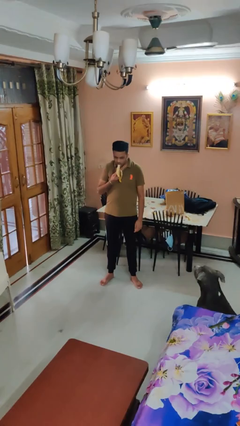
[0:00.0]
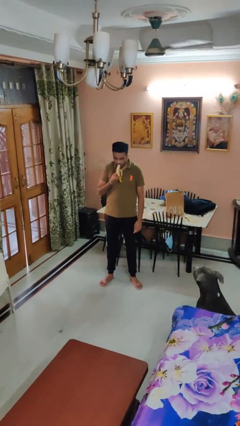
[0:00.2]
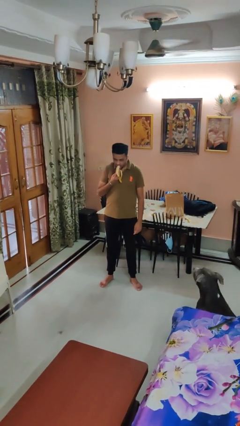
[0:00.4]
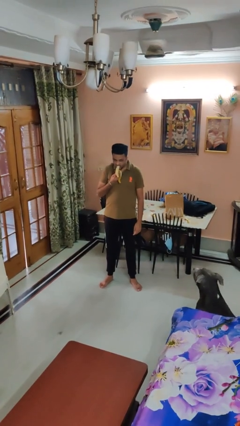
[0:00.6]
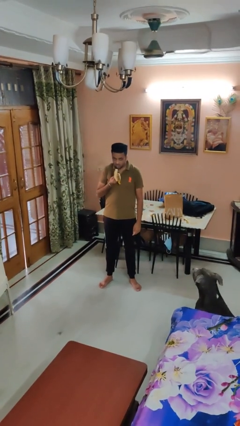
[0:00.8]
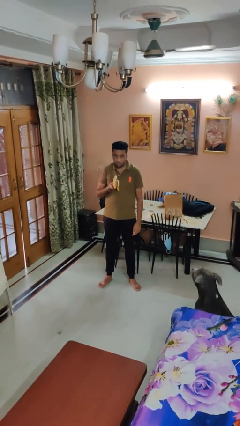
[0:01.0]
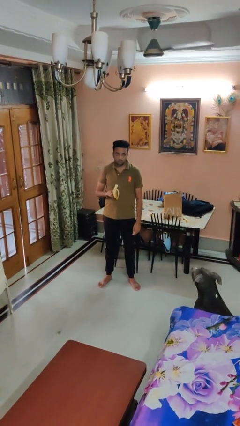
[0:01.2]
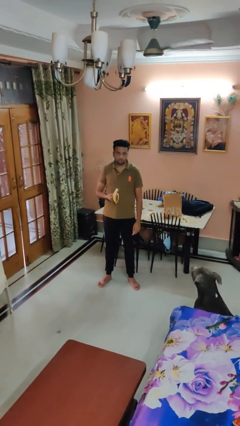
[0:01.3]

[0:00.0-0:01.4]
person eats banana

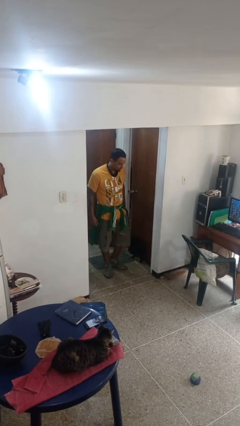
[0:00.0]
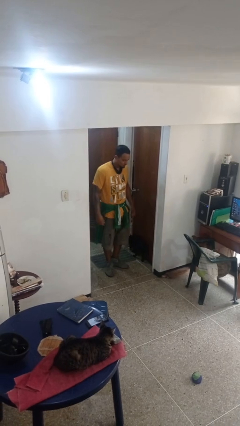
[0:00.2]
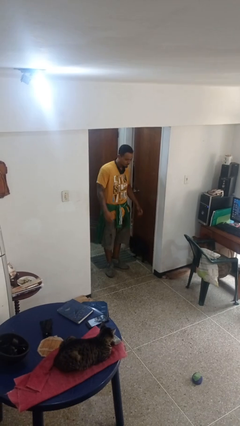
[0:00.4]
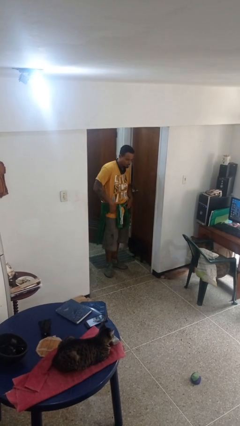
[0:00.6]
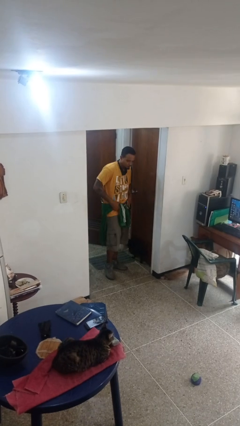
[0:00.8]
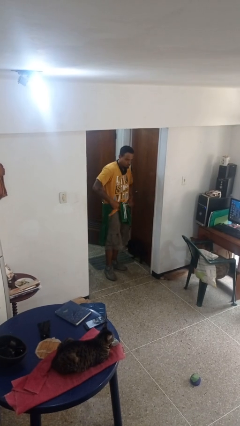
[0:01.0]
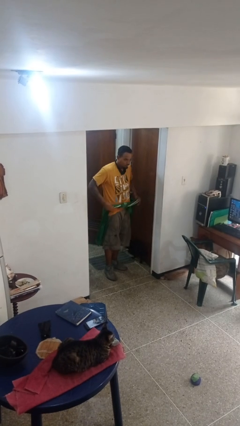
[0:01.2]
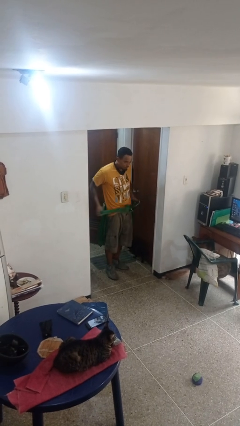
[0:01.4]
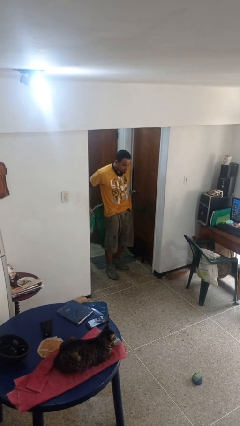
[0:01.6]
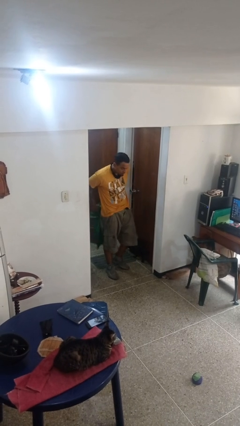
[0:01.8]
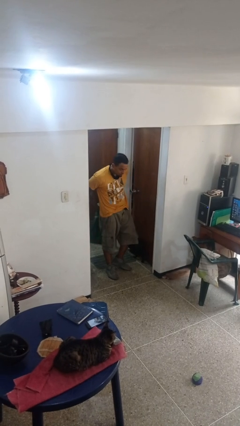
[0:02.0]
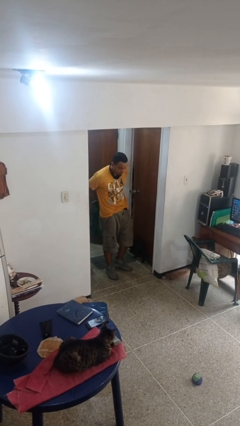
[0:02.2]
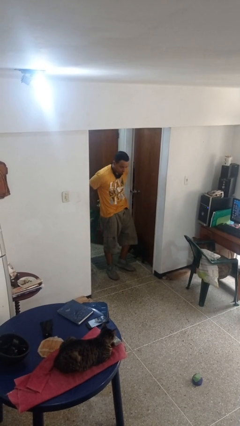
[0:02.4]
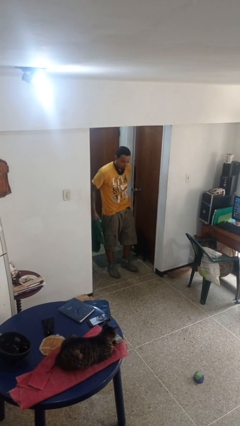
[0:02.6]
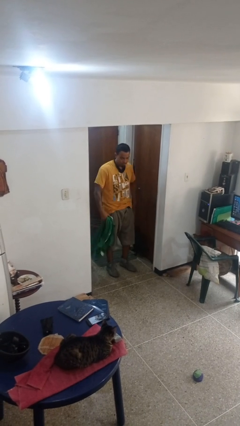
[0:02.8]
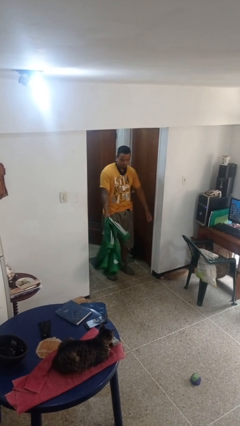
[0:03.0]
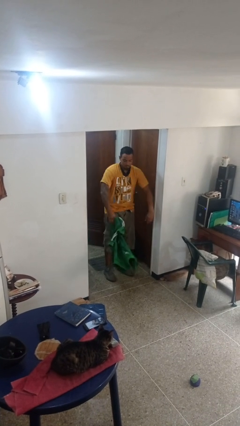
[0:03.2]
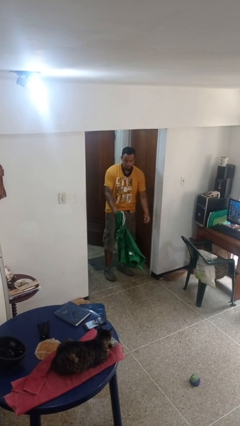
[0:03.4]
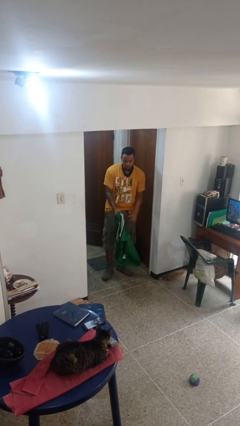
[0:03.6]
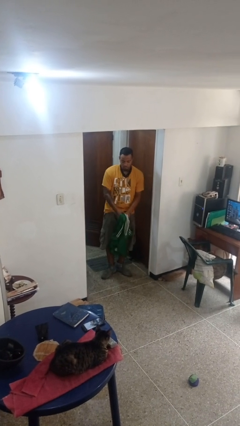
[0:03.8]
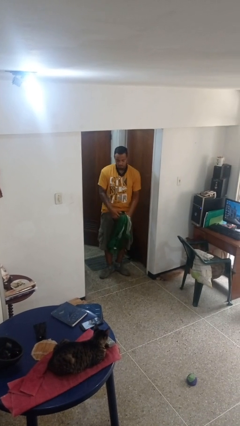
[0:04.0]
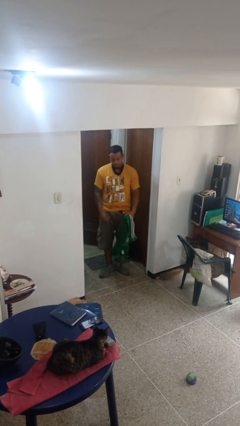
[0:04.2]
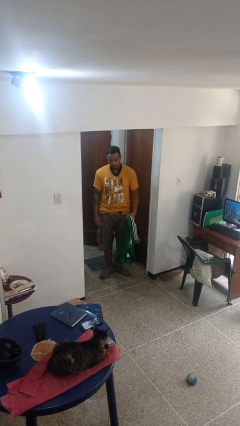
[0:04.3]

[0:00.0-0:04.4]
person unties jacket around waist

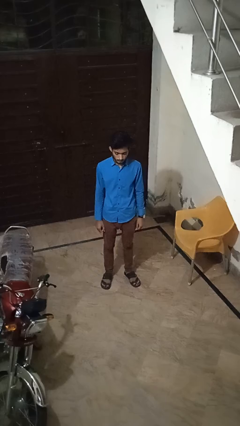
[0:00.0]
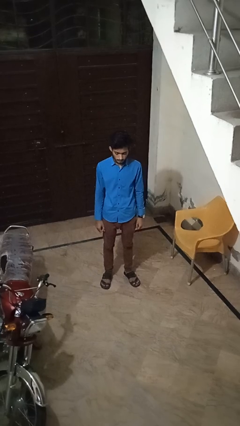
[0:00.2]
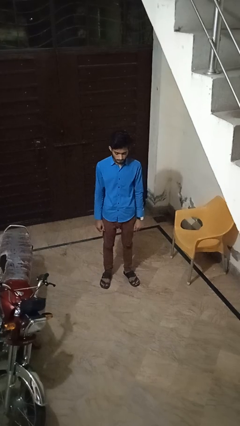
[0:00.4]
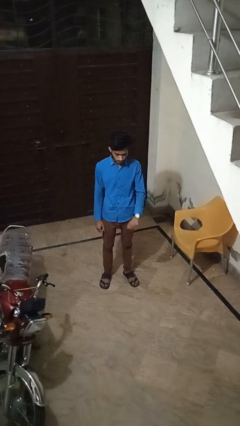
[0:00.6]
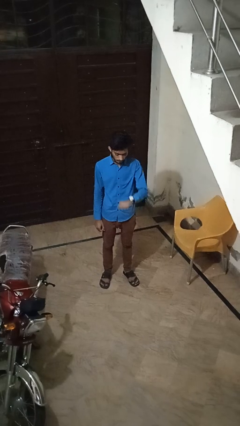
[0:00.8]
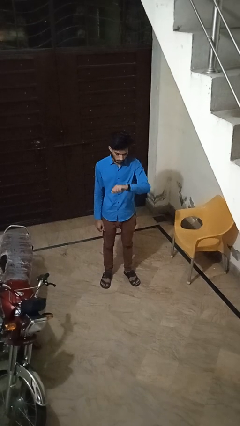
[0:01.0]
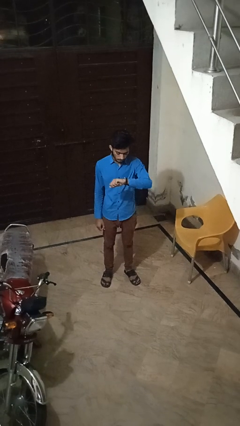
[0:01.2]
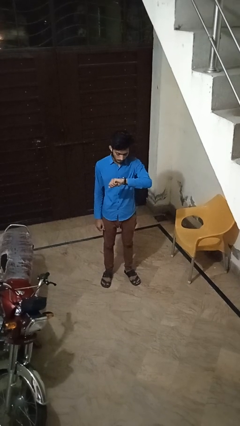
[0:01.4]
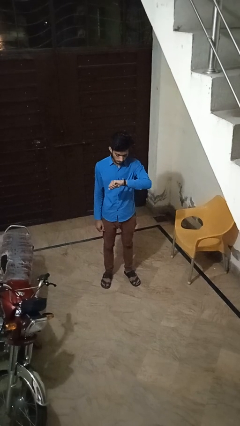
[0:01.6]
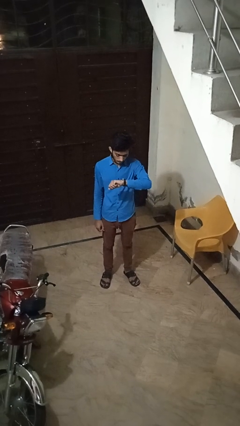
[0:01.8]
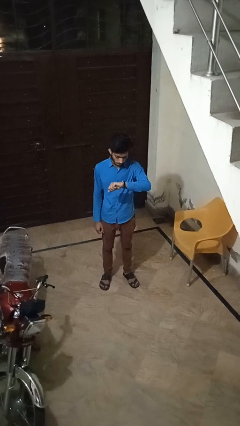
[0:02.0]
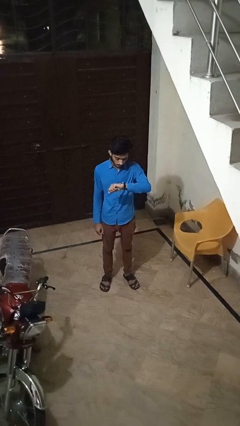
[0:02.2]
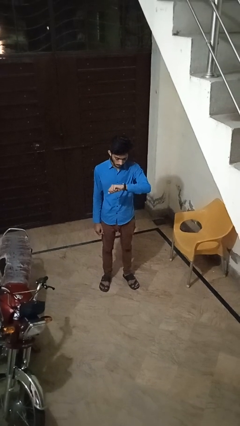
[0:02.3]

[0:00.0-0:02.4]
person looks at wristwatch

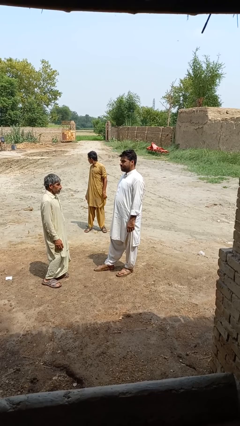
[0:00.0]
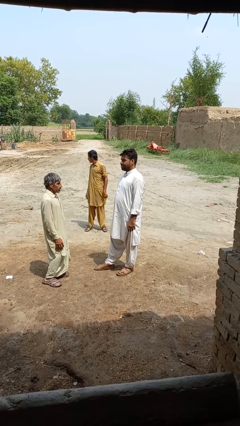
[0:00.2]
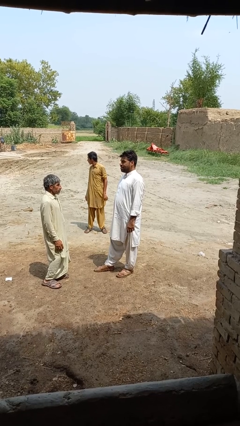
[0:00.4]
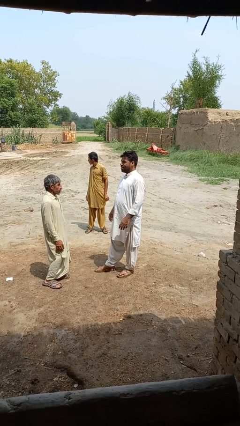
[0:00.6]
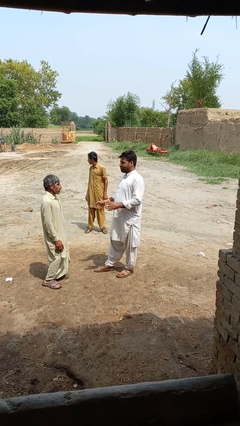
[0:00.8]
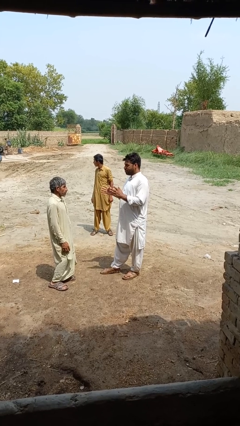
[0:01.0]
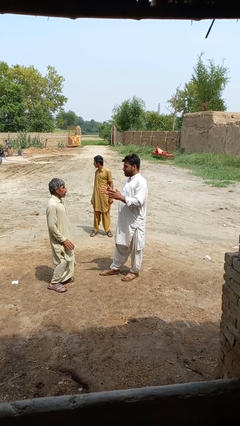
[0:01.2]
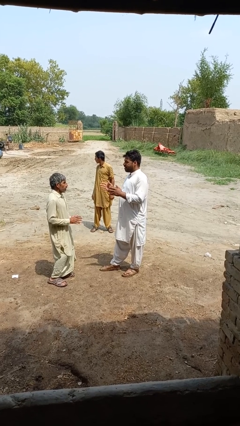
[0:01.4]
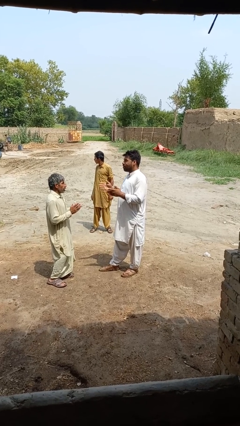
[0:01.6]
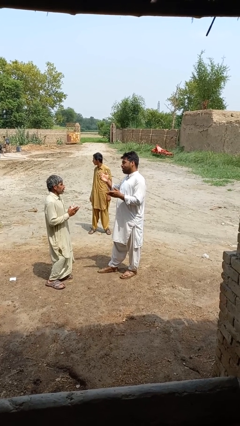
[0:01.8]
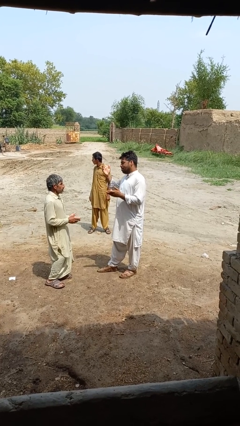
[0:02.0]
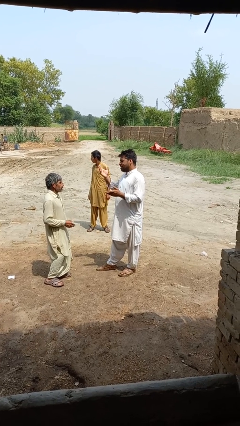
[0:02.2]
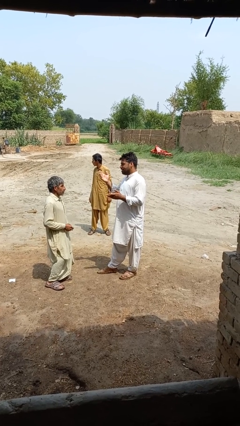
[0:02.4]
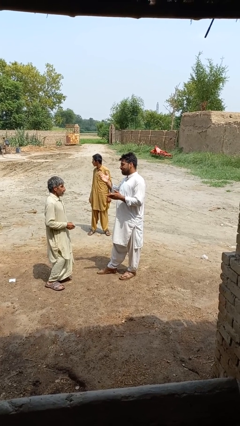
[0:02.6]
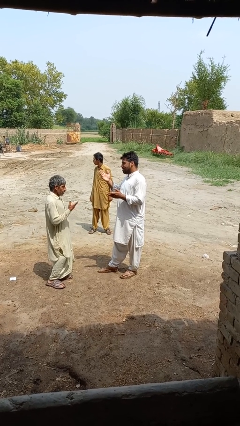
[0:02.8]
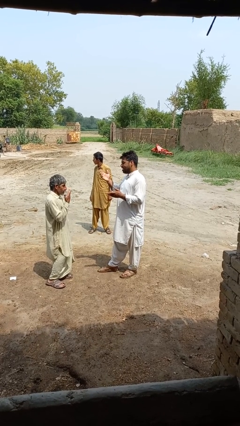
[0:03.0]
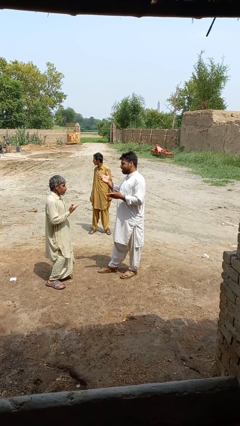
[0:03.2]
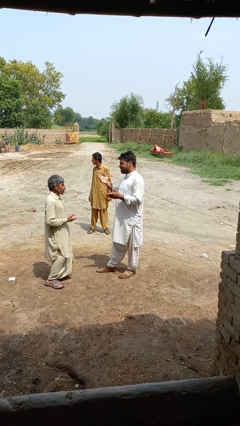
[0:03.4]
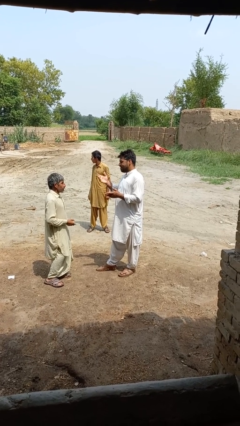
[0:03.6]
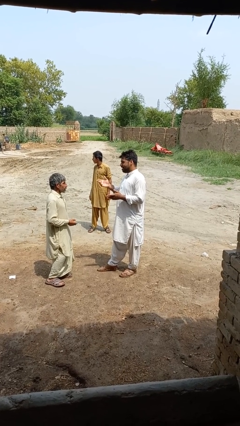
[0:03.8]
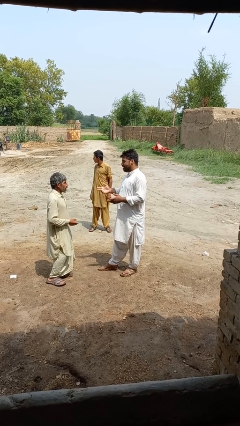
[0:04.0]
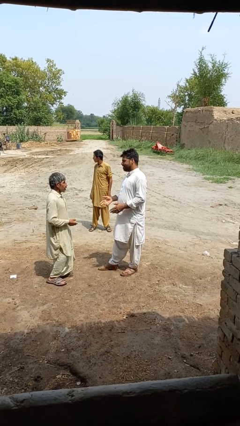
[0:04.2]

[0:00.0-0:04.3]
person talks to person

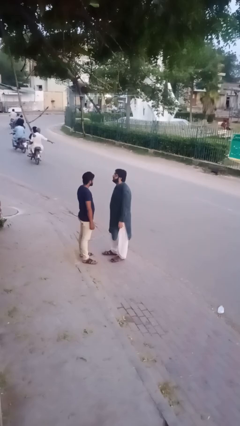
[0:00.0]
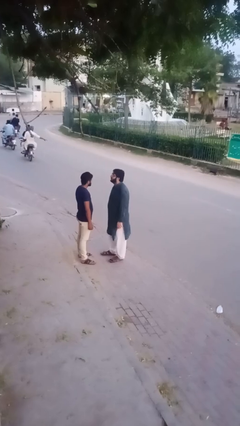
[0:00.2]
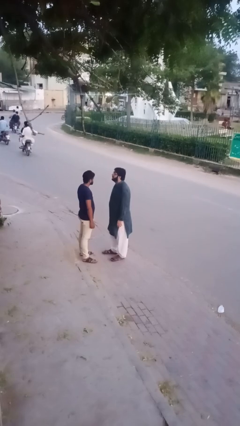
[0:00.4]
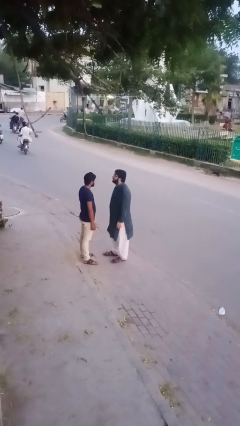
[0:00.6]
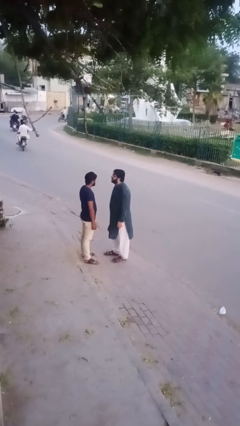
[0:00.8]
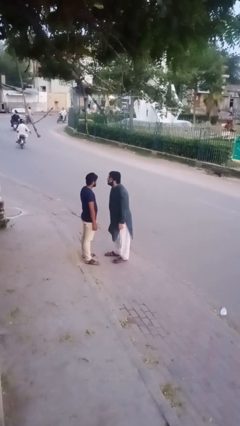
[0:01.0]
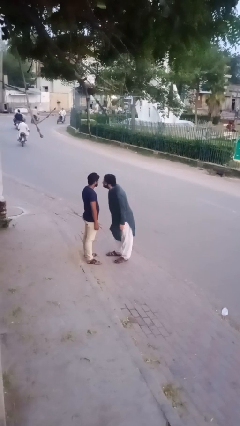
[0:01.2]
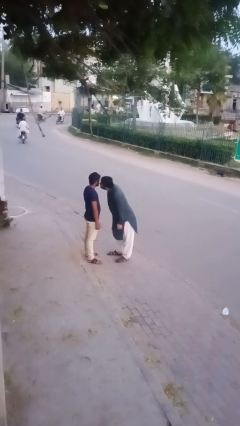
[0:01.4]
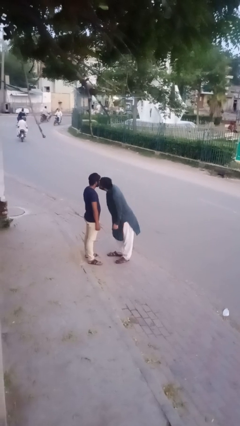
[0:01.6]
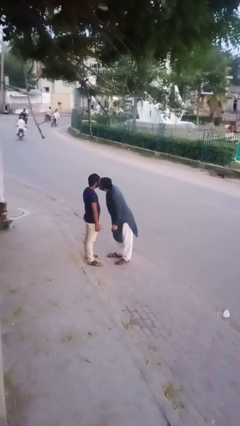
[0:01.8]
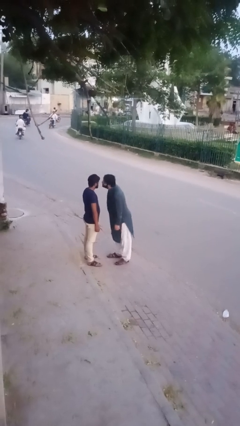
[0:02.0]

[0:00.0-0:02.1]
person kisses cheek of person

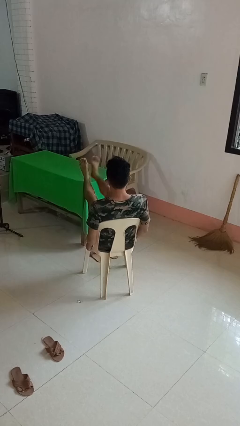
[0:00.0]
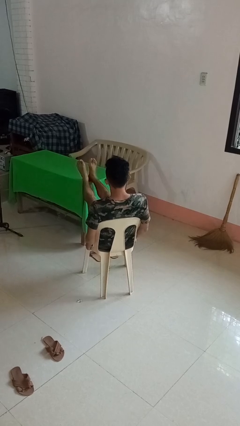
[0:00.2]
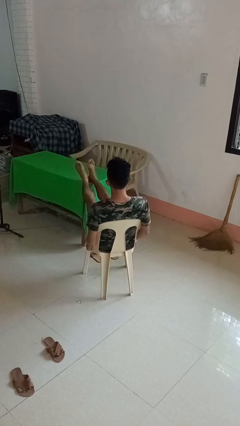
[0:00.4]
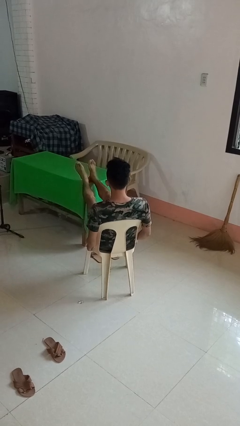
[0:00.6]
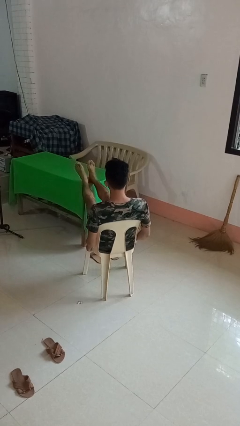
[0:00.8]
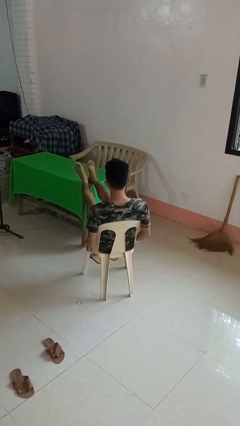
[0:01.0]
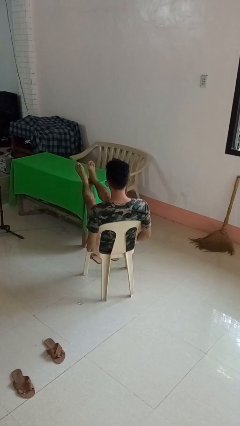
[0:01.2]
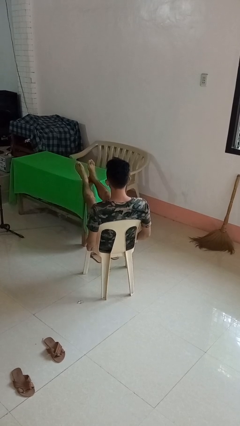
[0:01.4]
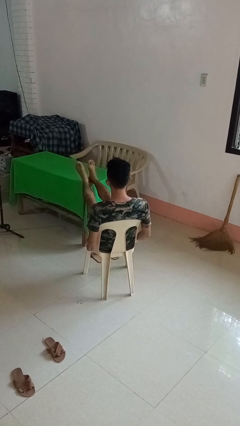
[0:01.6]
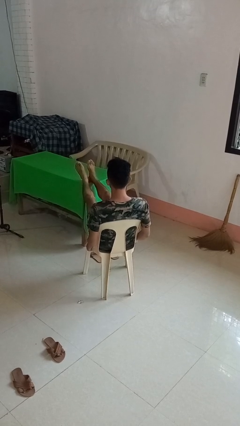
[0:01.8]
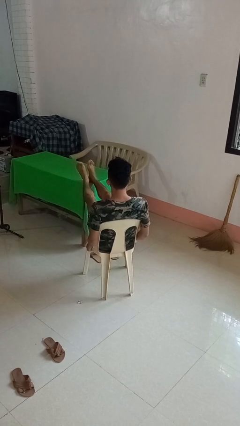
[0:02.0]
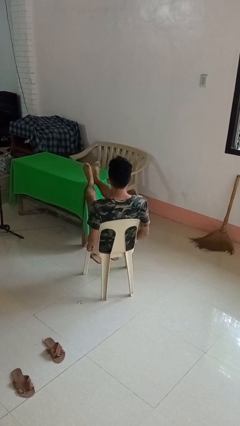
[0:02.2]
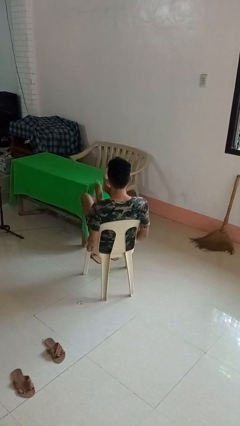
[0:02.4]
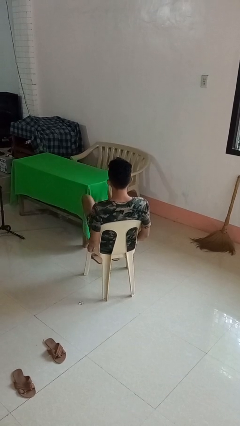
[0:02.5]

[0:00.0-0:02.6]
person puts feet up
